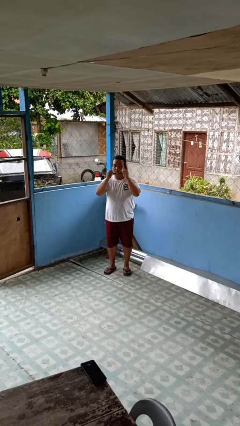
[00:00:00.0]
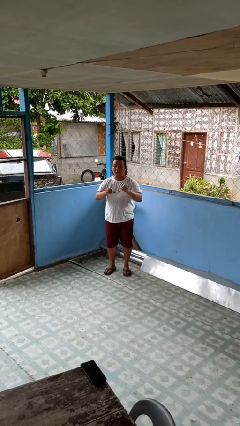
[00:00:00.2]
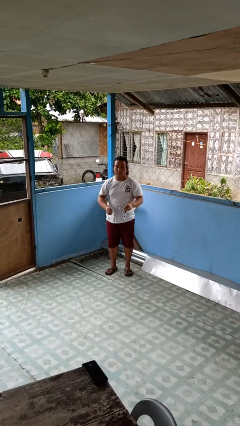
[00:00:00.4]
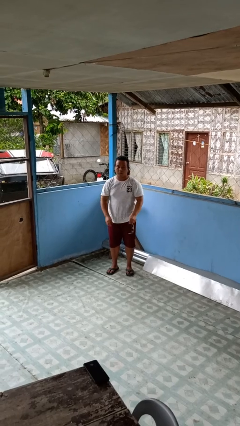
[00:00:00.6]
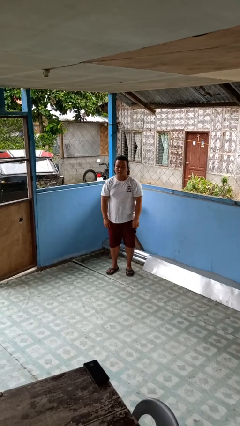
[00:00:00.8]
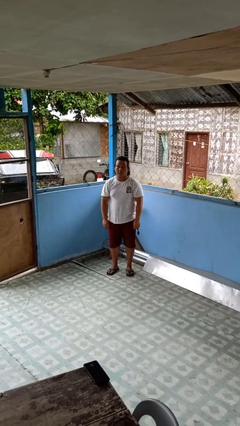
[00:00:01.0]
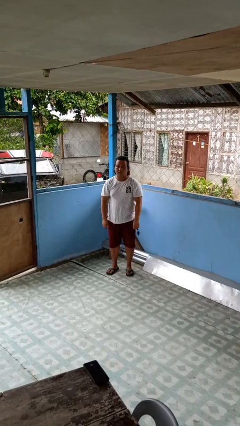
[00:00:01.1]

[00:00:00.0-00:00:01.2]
person takes off sunglasses

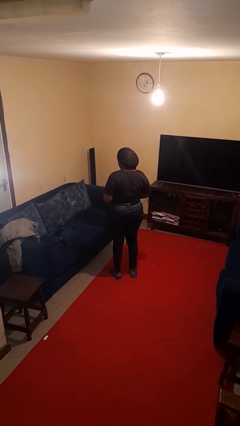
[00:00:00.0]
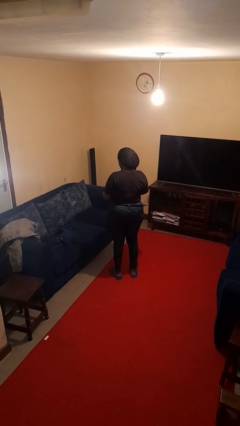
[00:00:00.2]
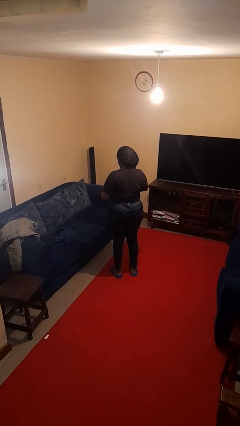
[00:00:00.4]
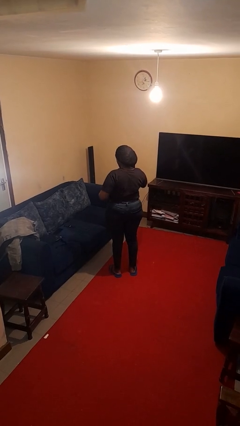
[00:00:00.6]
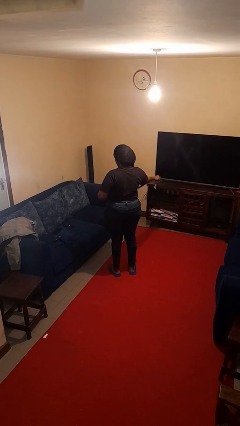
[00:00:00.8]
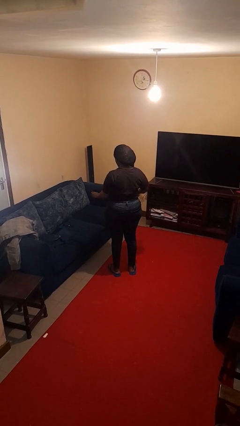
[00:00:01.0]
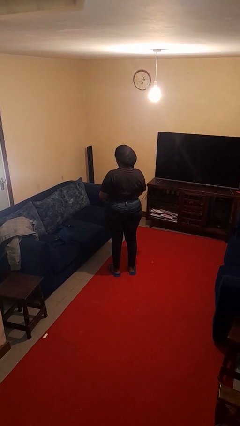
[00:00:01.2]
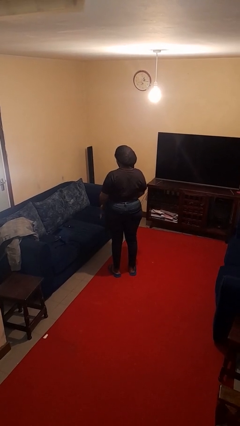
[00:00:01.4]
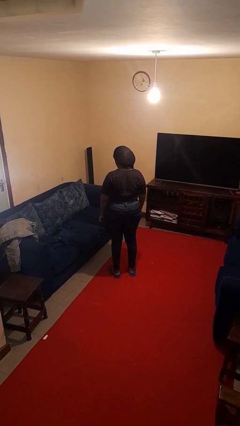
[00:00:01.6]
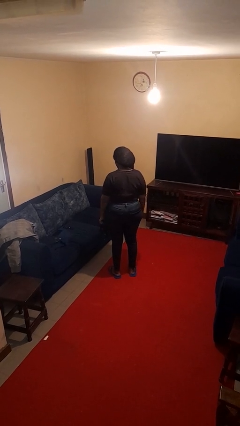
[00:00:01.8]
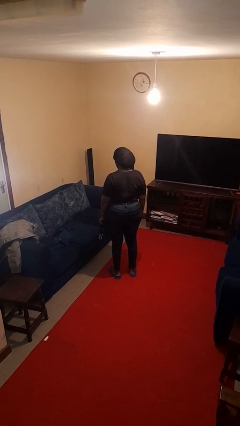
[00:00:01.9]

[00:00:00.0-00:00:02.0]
person takes off belt

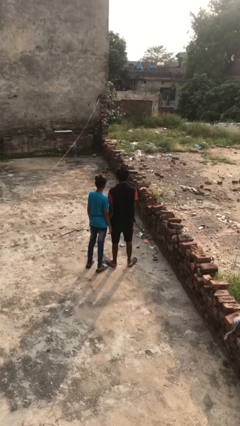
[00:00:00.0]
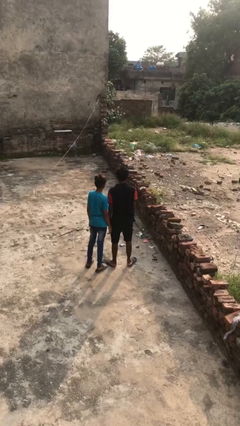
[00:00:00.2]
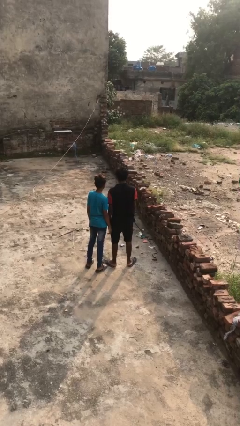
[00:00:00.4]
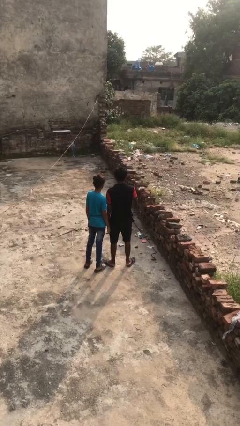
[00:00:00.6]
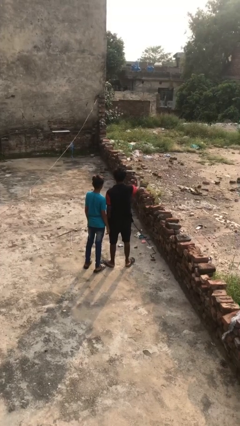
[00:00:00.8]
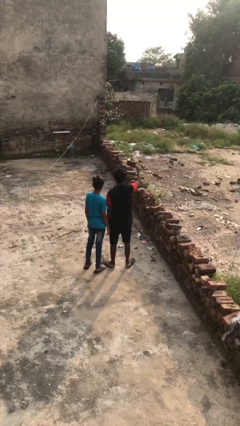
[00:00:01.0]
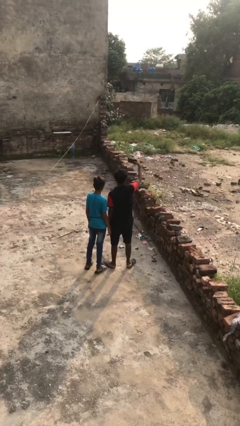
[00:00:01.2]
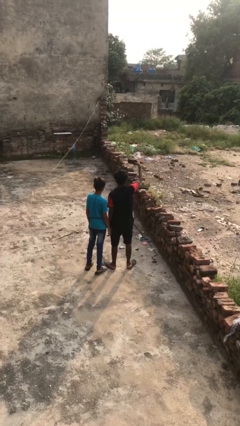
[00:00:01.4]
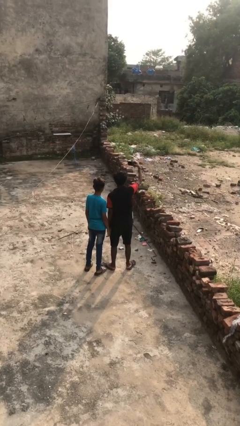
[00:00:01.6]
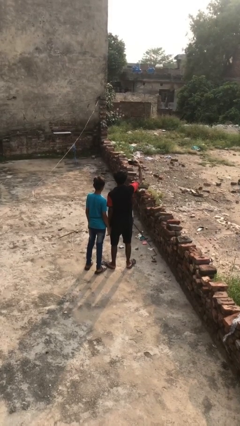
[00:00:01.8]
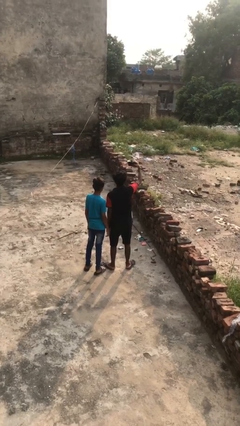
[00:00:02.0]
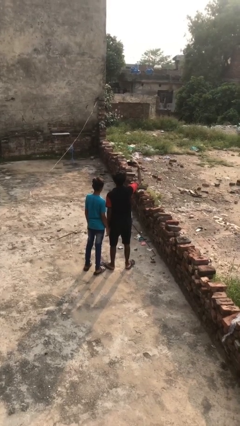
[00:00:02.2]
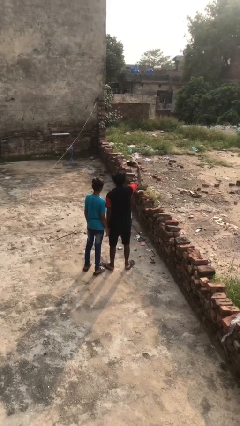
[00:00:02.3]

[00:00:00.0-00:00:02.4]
person takes selfie with person

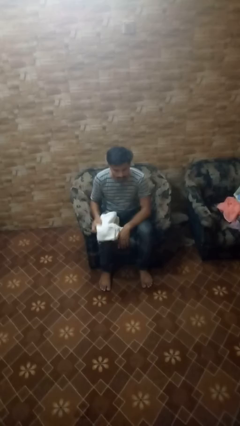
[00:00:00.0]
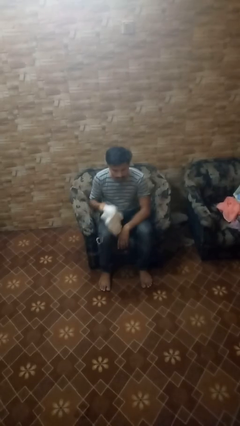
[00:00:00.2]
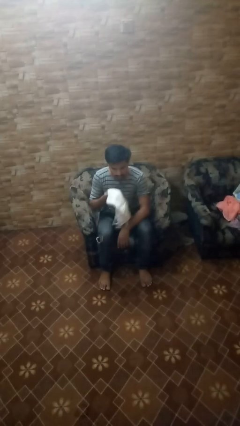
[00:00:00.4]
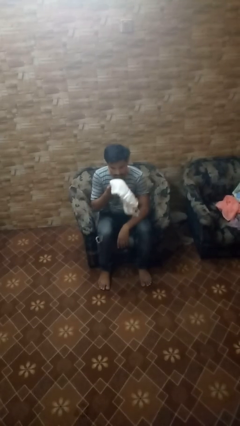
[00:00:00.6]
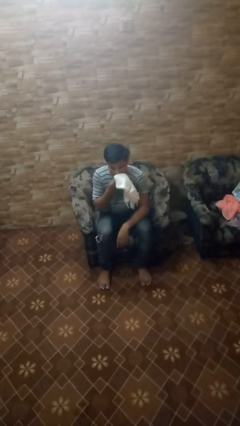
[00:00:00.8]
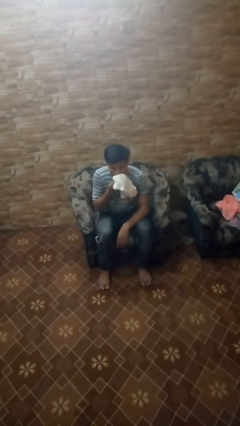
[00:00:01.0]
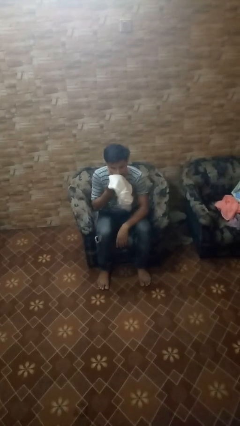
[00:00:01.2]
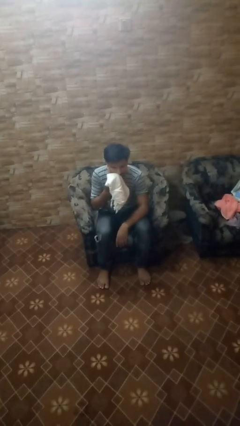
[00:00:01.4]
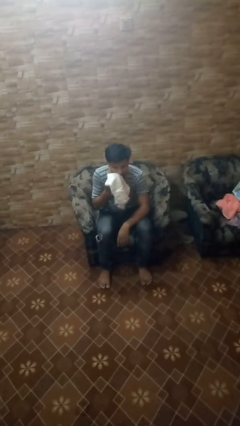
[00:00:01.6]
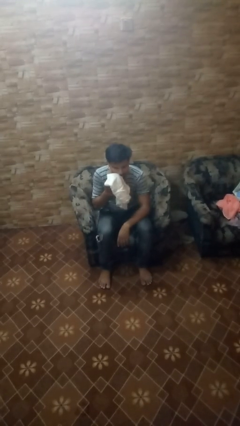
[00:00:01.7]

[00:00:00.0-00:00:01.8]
person wipes mouth with napkin

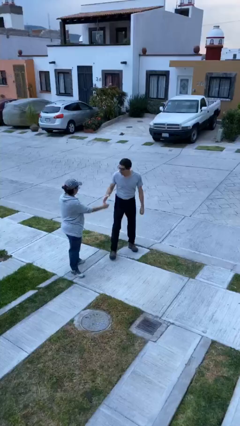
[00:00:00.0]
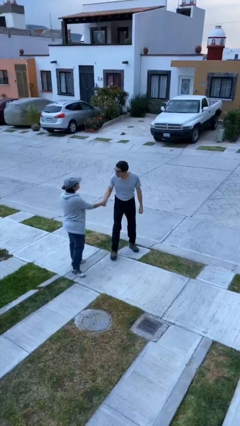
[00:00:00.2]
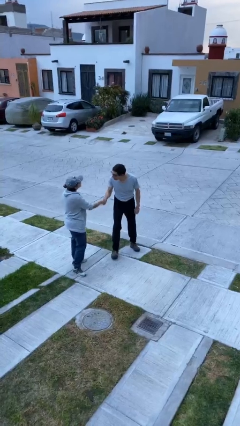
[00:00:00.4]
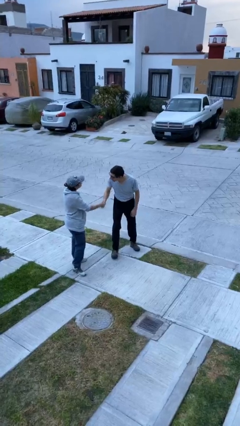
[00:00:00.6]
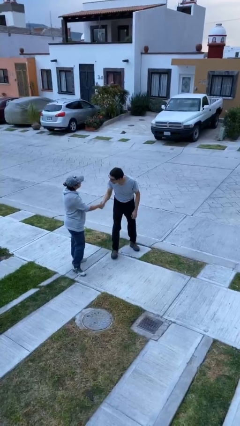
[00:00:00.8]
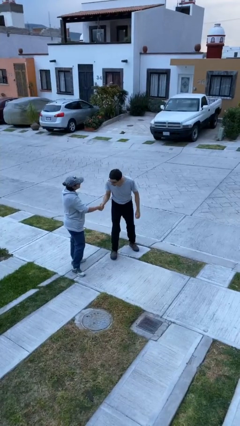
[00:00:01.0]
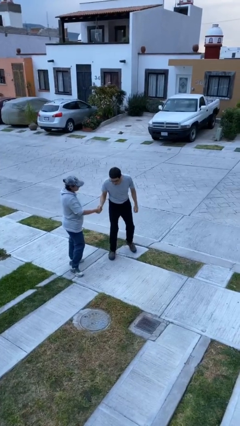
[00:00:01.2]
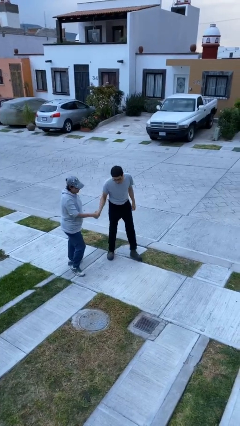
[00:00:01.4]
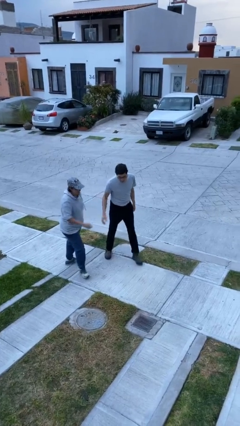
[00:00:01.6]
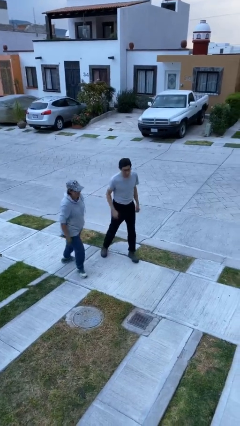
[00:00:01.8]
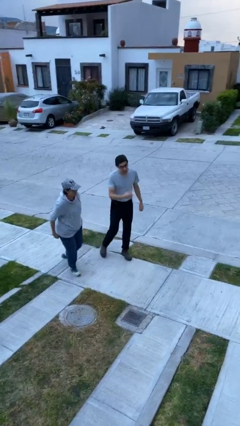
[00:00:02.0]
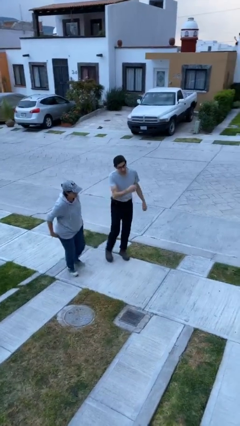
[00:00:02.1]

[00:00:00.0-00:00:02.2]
person shakes hand

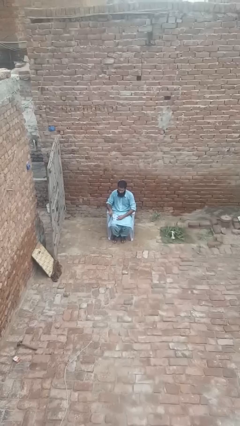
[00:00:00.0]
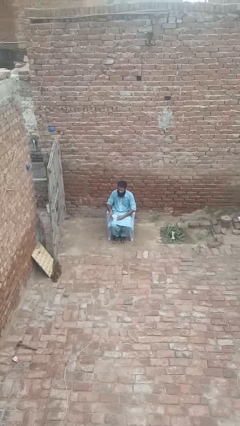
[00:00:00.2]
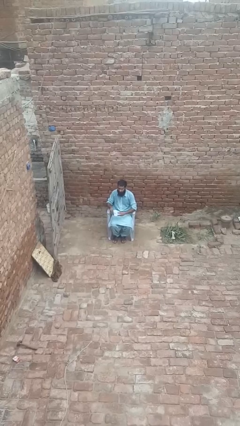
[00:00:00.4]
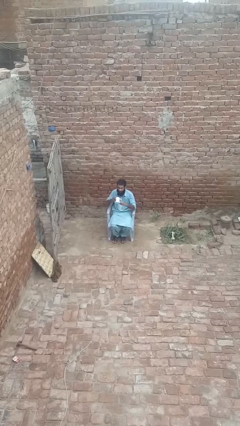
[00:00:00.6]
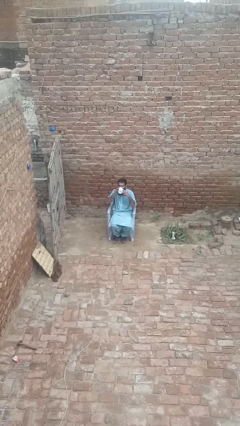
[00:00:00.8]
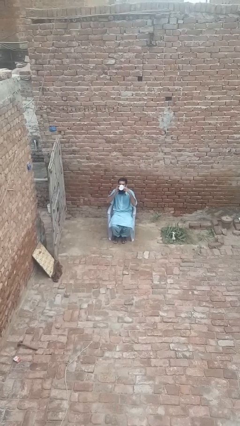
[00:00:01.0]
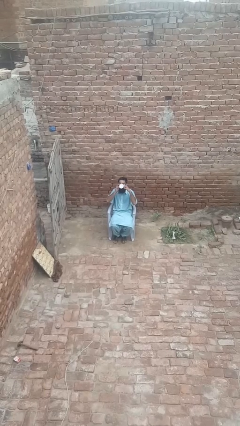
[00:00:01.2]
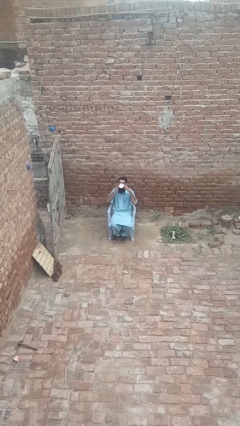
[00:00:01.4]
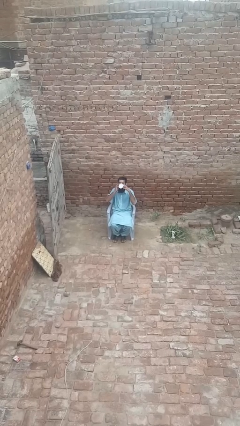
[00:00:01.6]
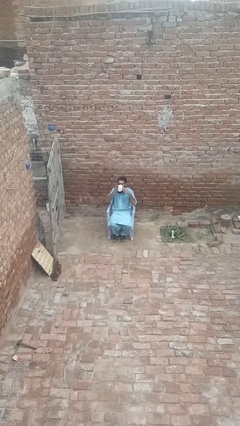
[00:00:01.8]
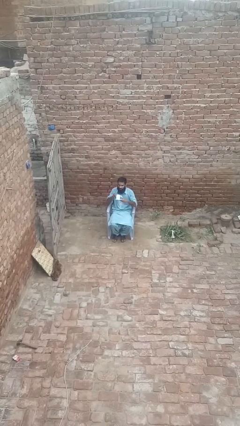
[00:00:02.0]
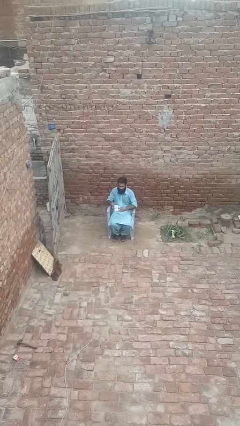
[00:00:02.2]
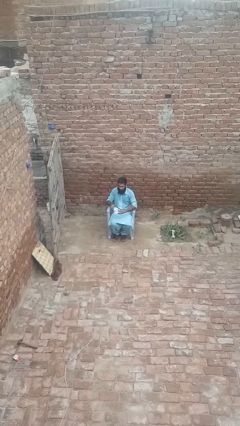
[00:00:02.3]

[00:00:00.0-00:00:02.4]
person drinks from mug

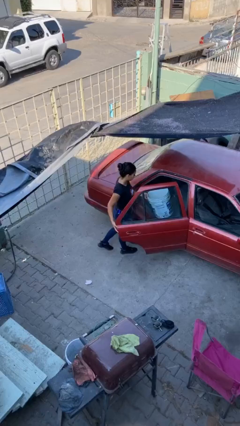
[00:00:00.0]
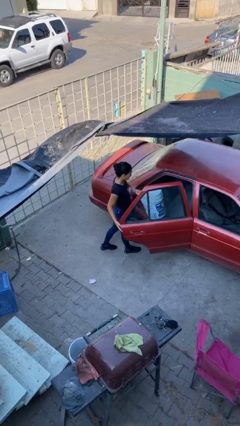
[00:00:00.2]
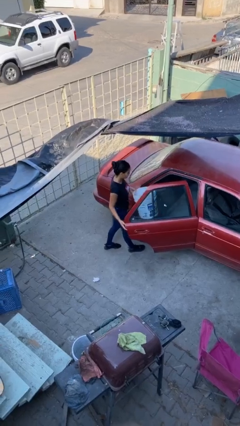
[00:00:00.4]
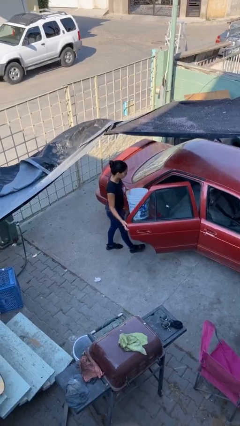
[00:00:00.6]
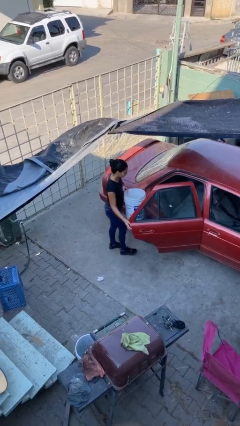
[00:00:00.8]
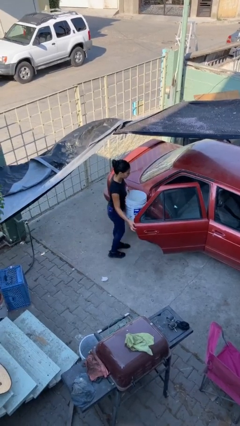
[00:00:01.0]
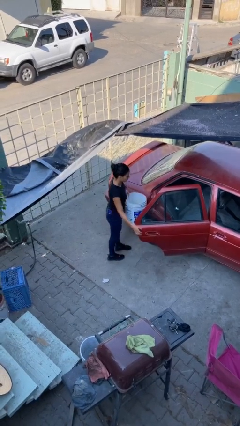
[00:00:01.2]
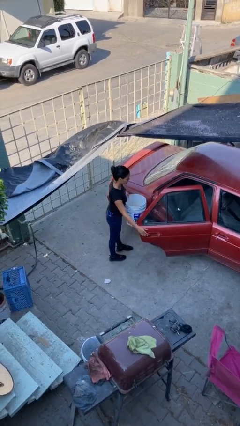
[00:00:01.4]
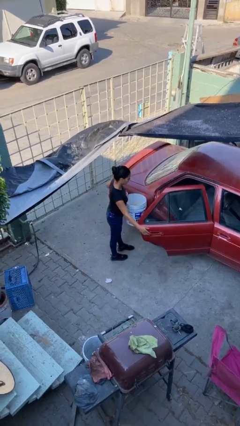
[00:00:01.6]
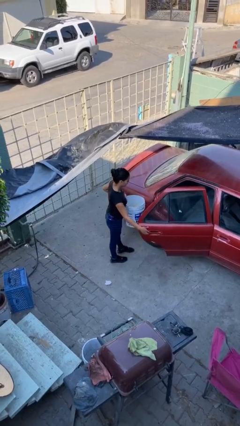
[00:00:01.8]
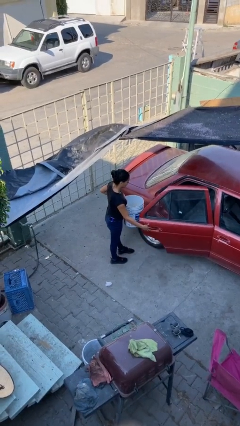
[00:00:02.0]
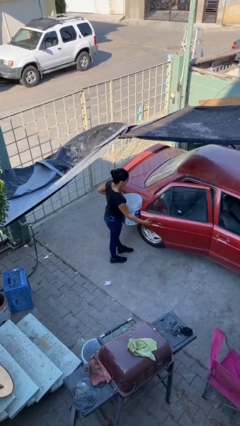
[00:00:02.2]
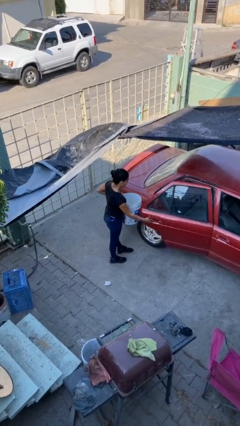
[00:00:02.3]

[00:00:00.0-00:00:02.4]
person unloads car

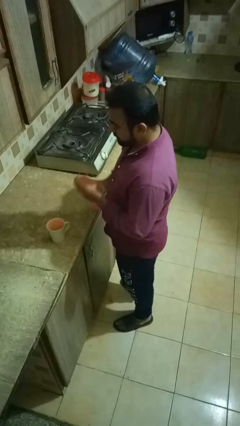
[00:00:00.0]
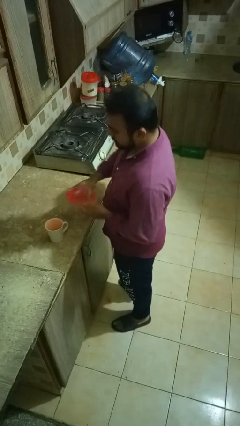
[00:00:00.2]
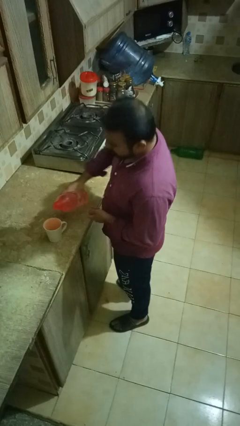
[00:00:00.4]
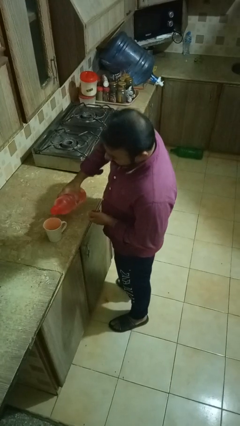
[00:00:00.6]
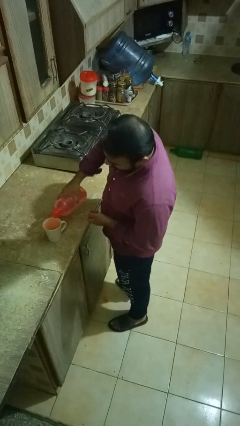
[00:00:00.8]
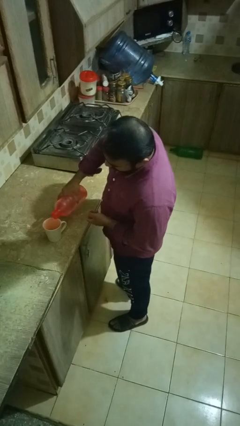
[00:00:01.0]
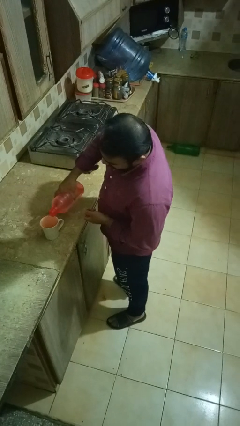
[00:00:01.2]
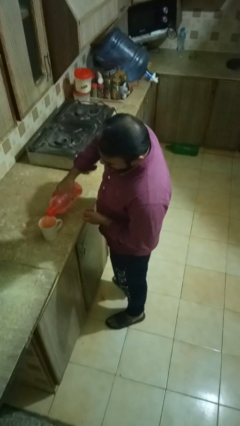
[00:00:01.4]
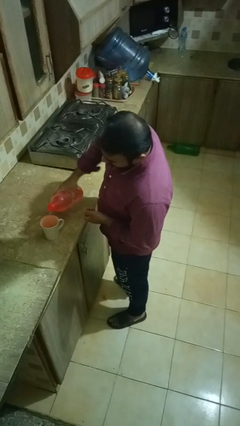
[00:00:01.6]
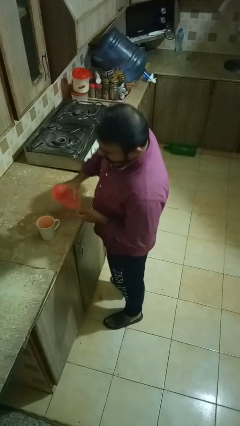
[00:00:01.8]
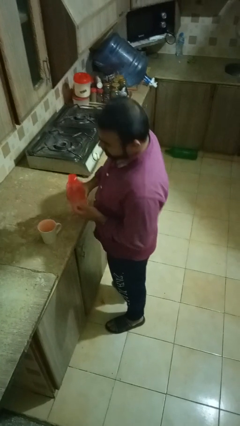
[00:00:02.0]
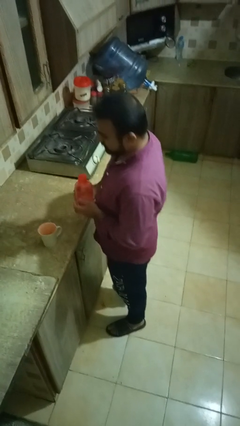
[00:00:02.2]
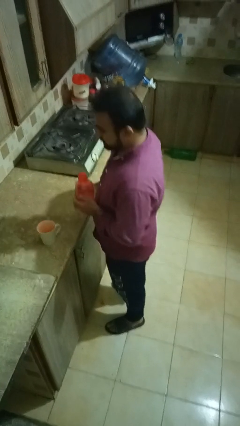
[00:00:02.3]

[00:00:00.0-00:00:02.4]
person pours liquid into cup
